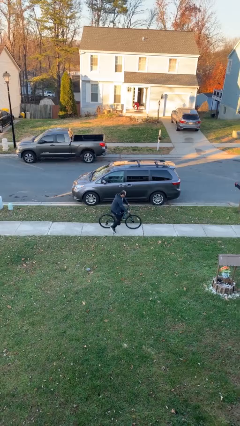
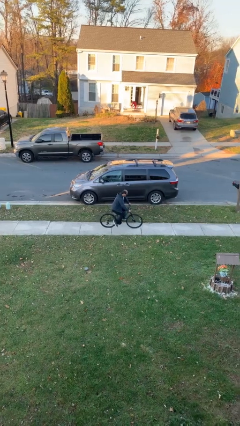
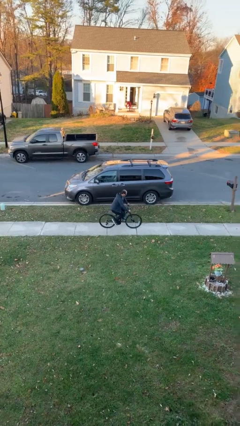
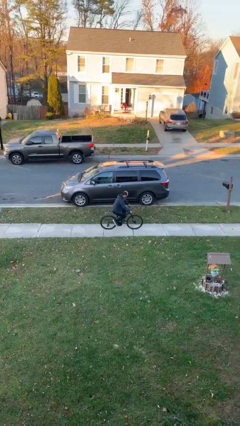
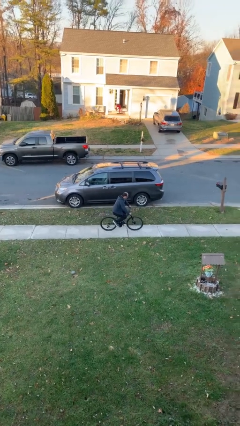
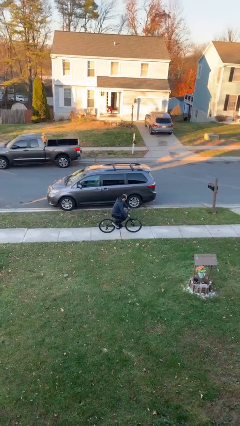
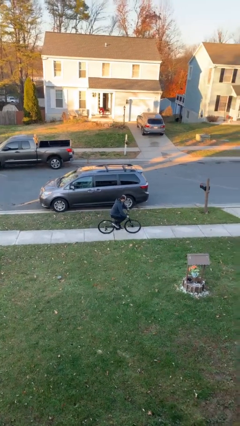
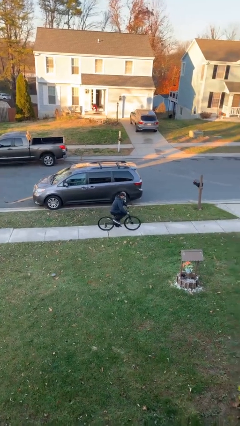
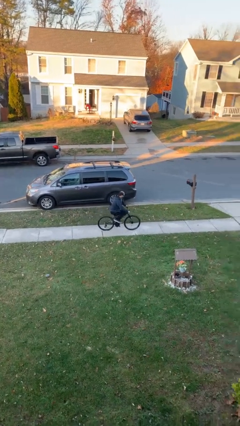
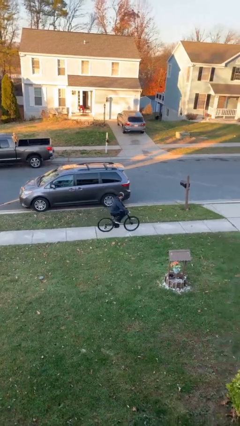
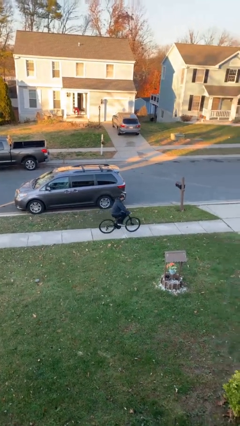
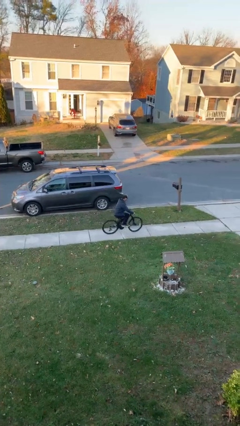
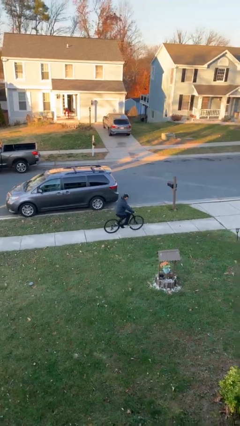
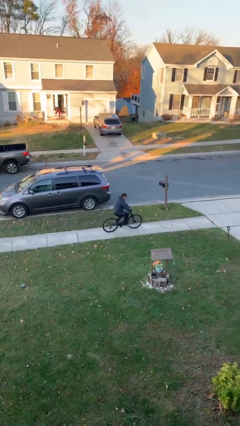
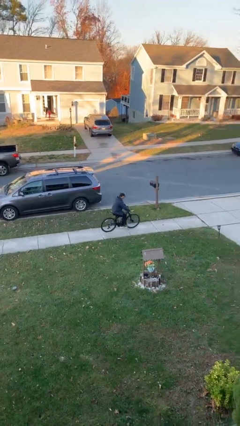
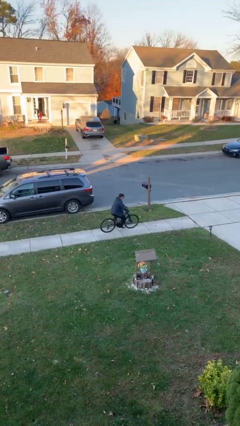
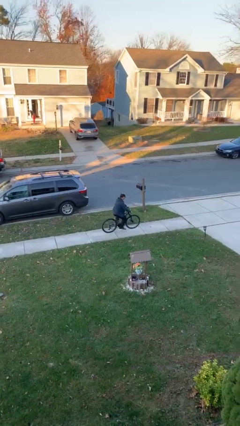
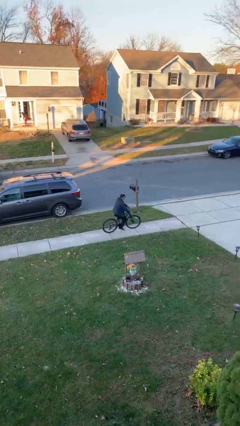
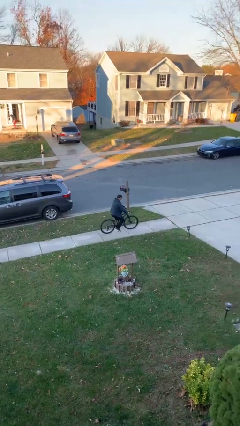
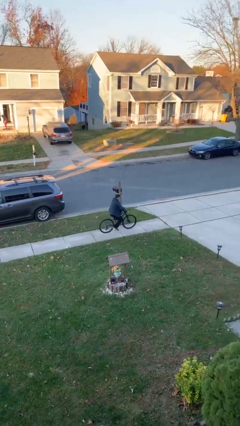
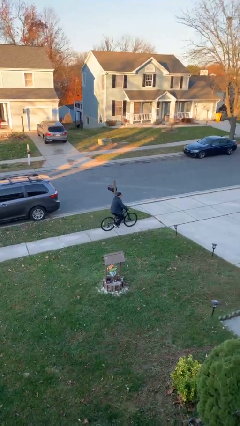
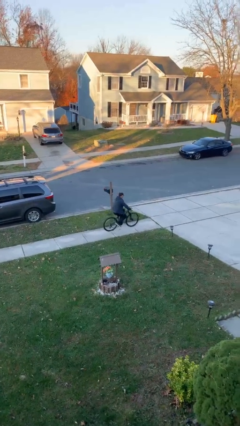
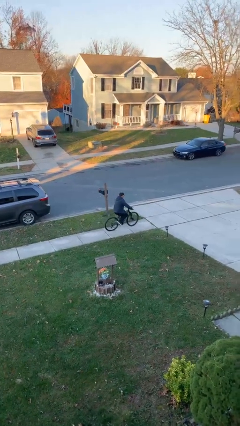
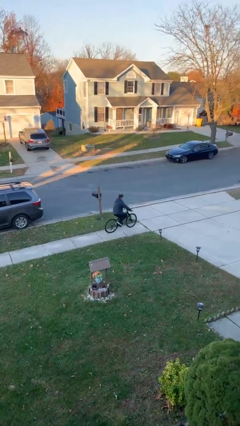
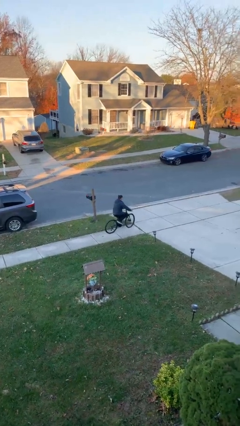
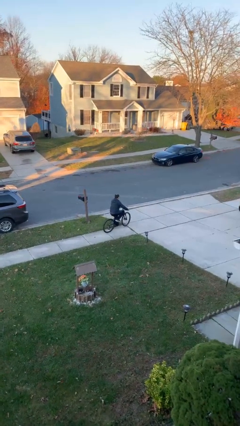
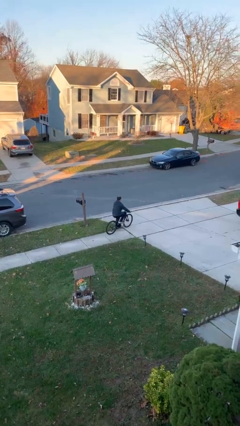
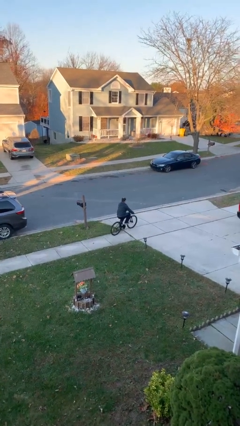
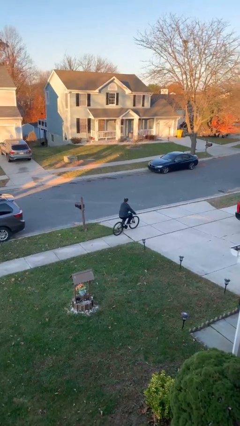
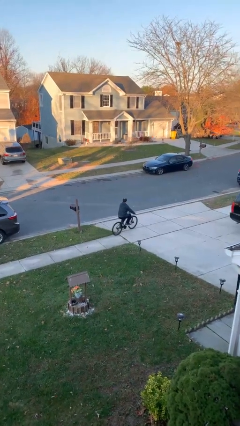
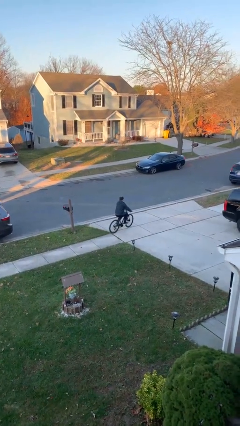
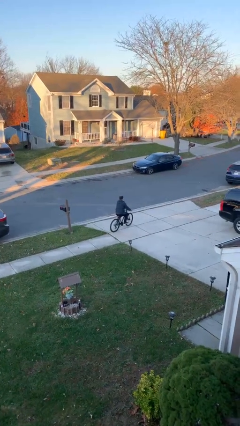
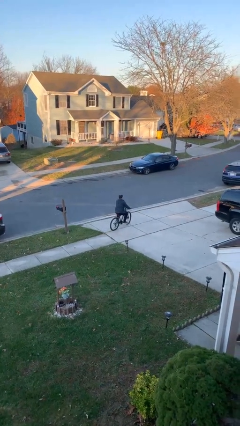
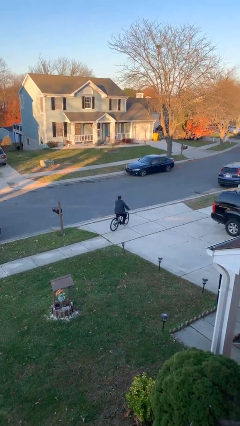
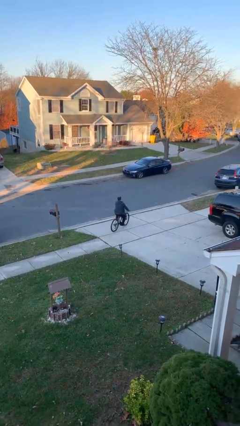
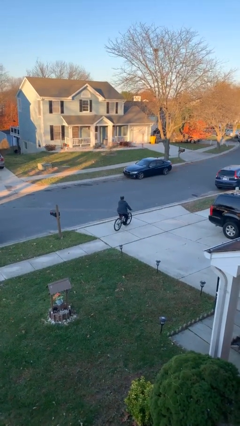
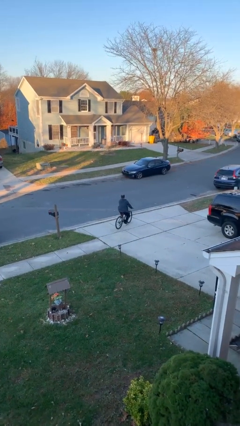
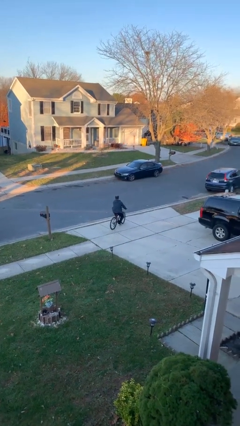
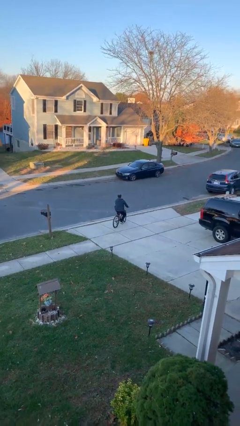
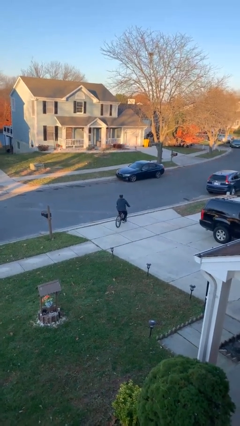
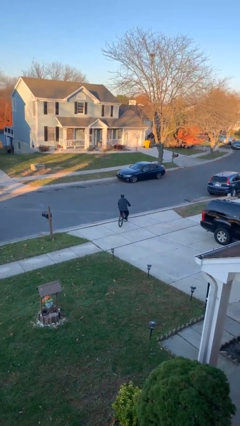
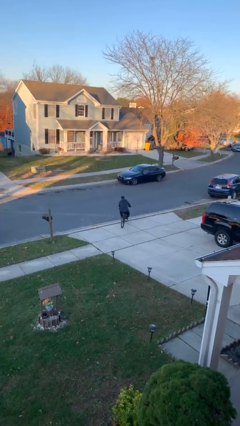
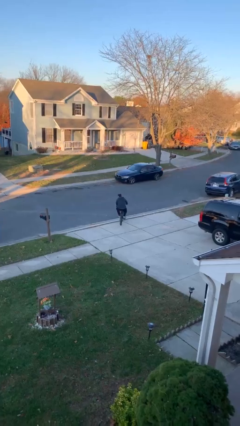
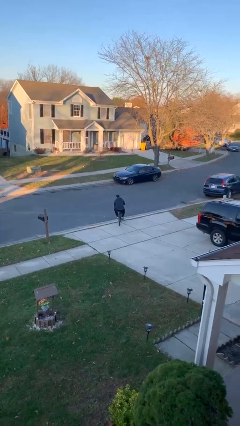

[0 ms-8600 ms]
person rides bicycle

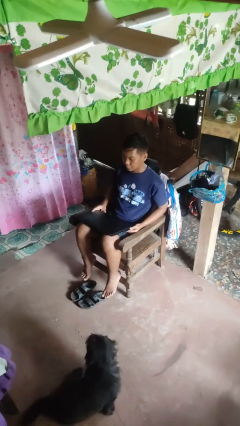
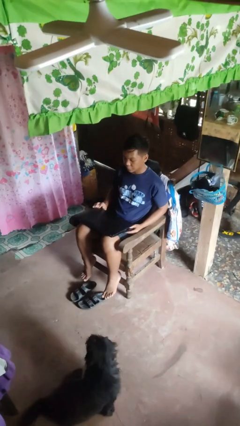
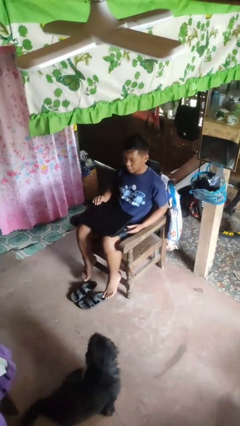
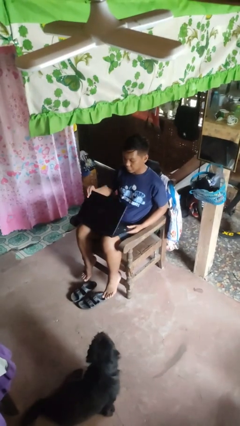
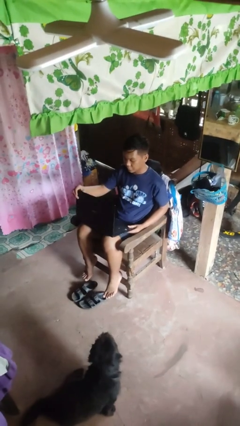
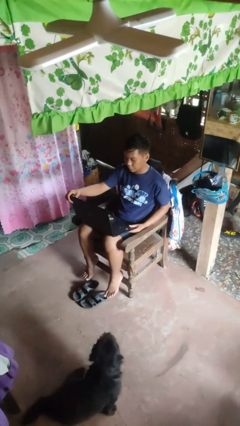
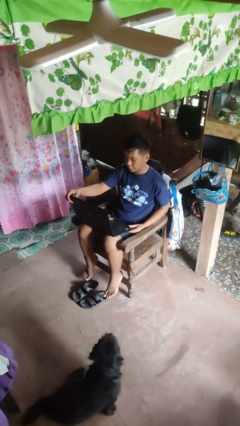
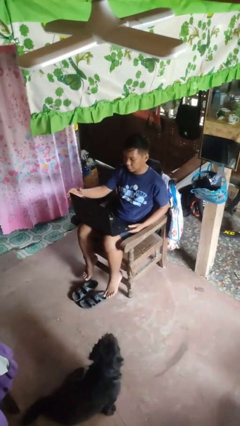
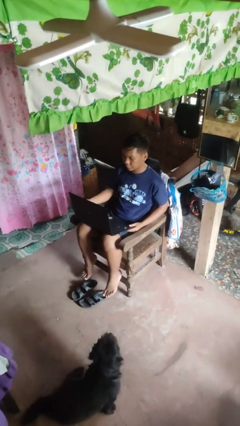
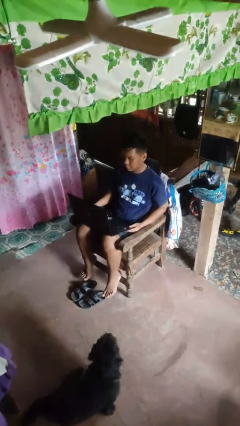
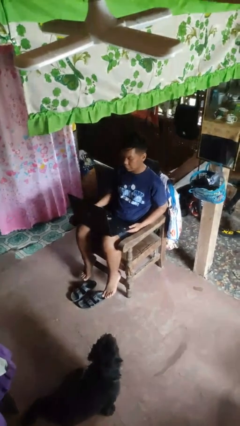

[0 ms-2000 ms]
person opens laptop

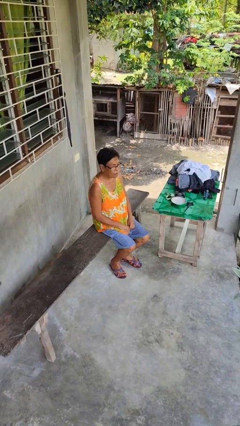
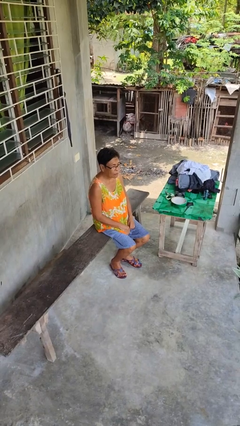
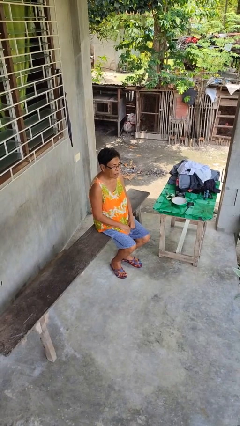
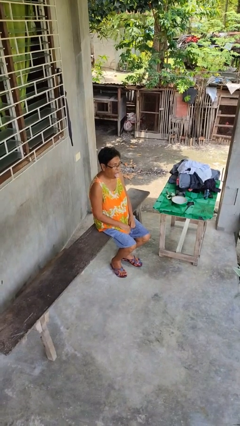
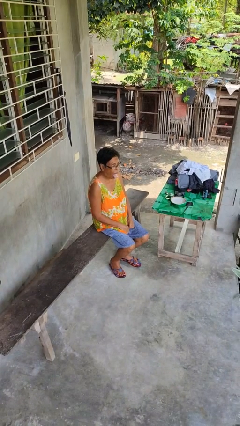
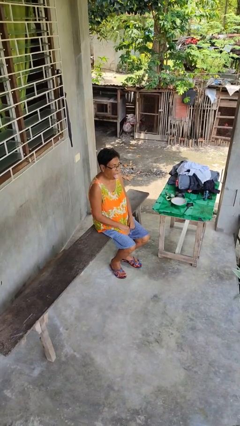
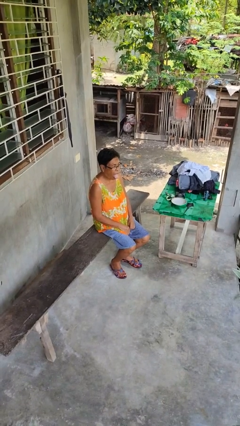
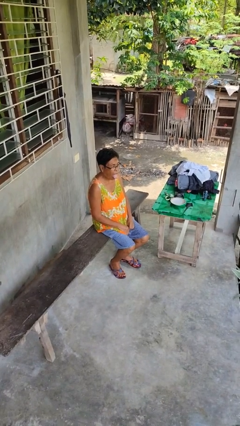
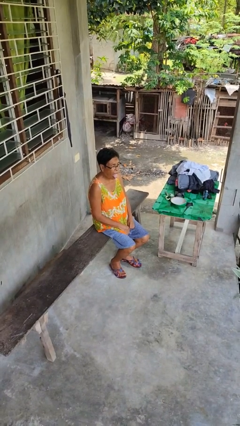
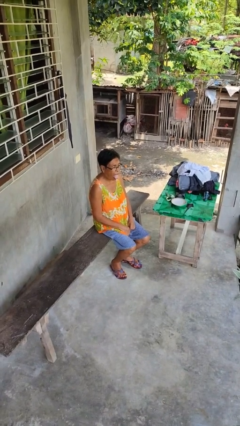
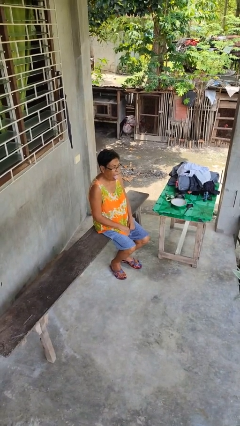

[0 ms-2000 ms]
person sticks out tongue

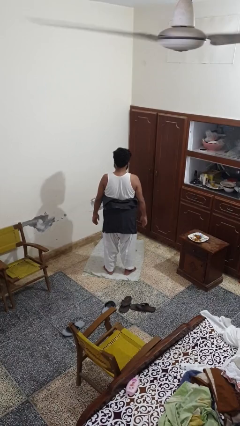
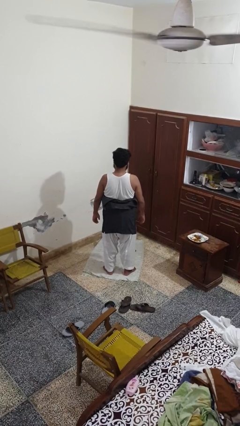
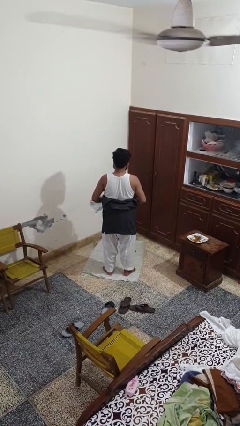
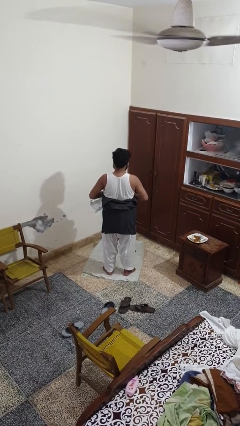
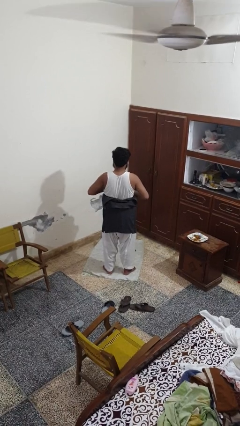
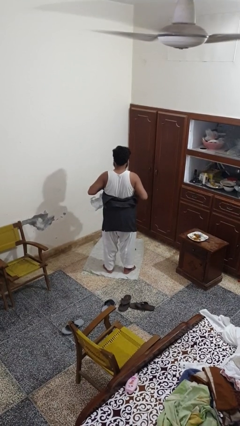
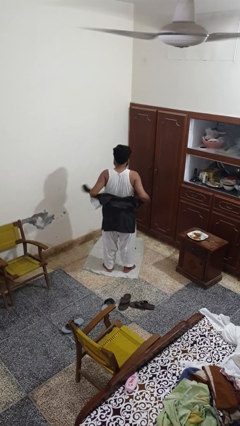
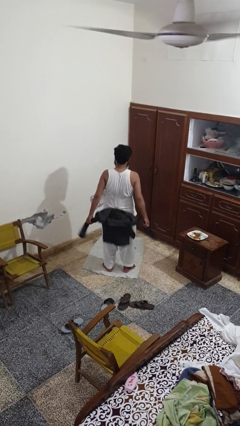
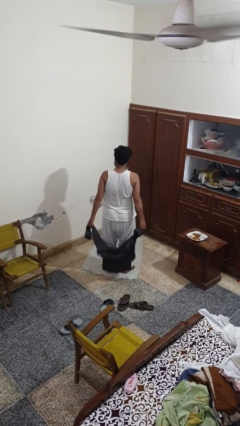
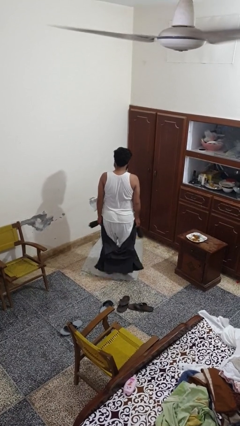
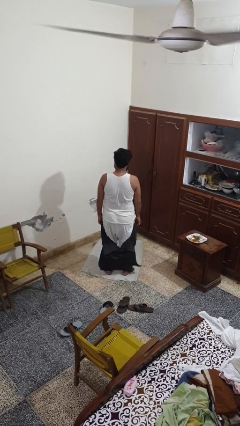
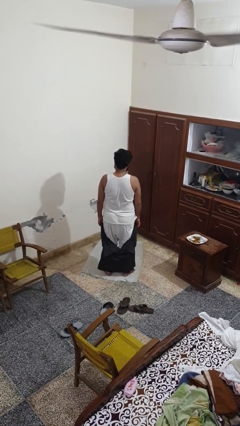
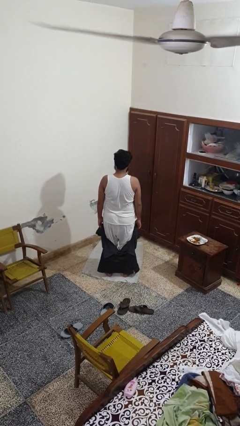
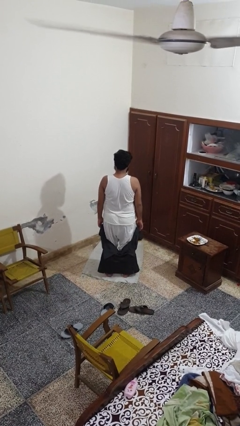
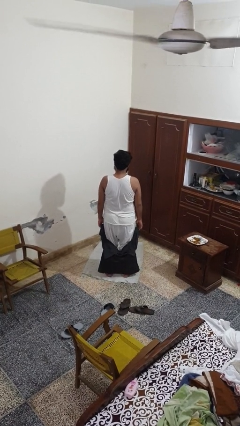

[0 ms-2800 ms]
person unties jacket around waist

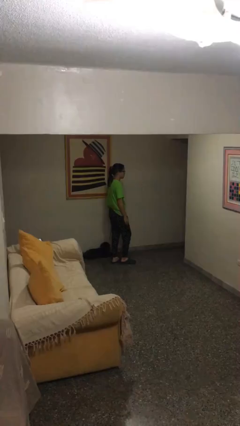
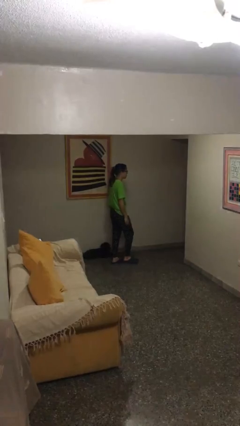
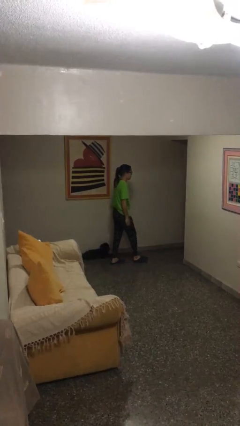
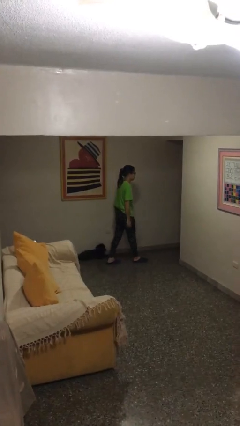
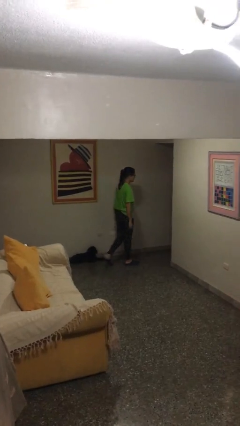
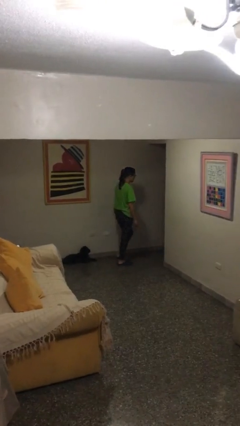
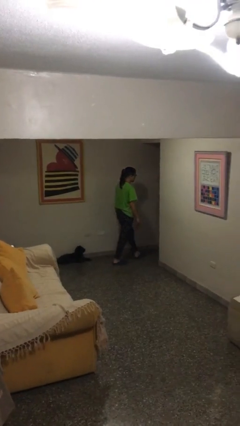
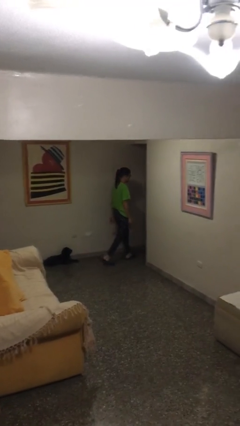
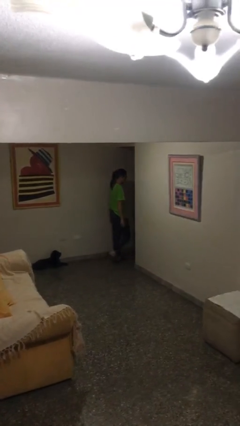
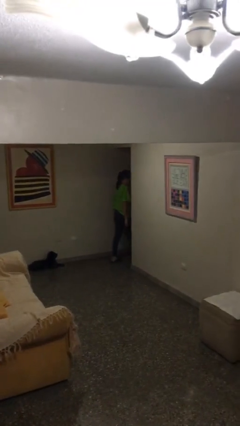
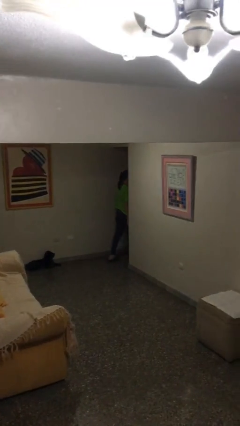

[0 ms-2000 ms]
person exits scene through structure
